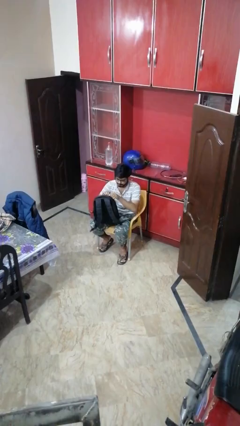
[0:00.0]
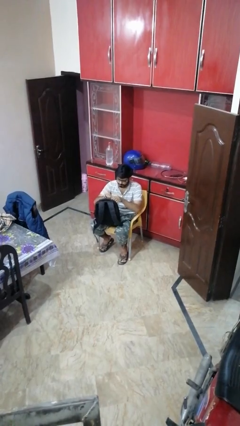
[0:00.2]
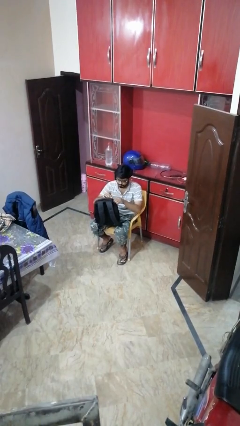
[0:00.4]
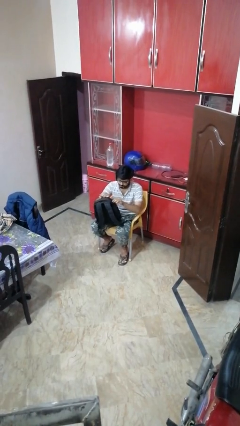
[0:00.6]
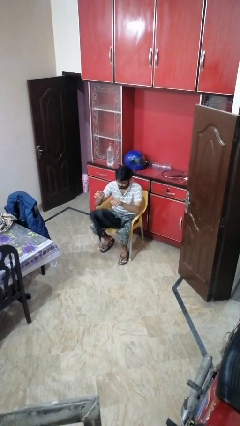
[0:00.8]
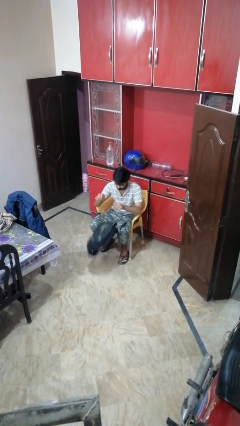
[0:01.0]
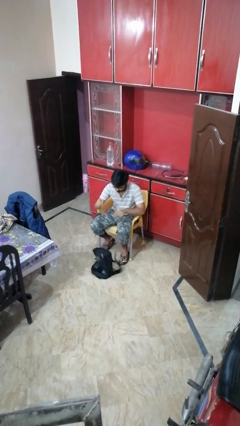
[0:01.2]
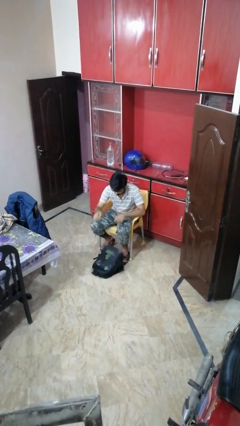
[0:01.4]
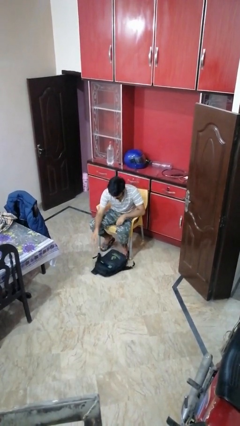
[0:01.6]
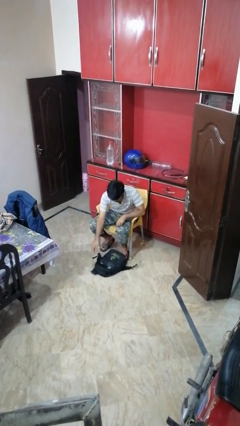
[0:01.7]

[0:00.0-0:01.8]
person drops object

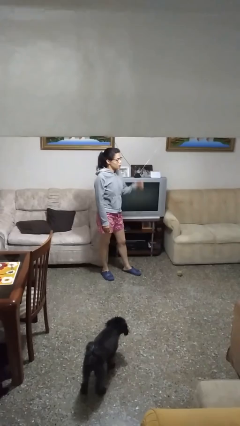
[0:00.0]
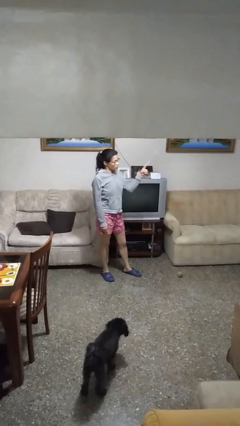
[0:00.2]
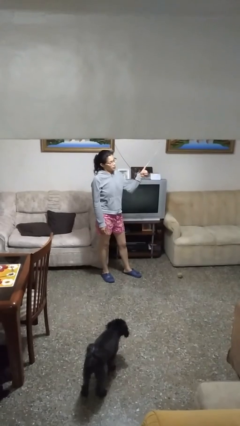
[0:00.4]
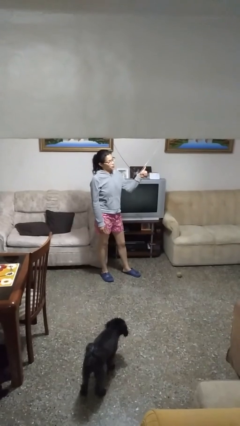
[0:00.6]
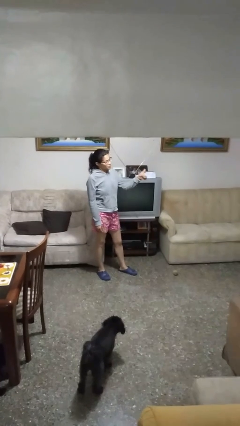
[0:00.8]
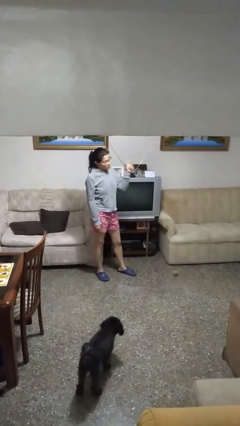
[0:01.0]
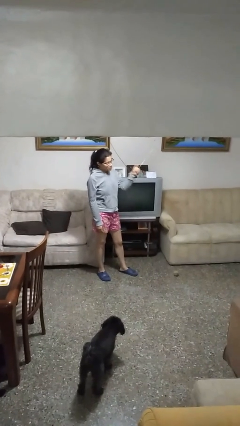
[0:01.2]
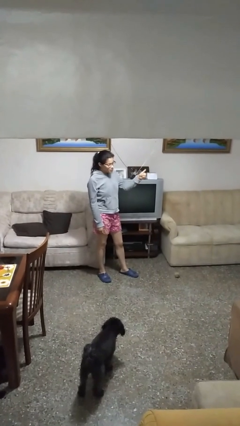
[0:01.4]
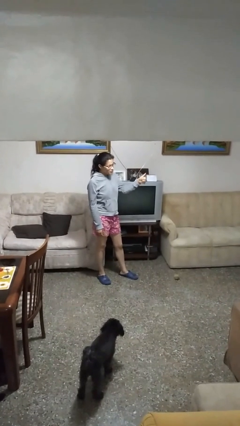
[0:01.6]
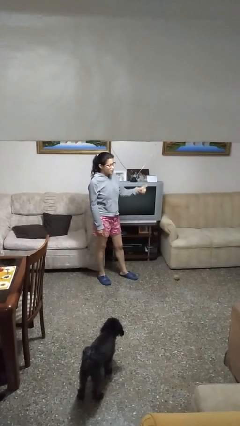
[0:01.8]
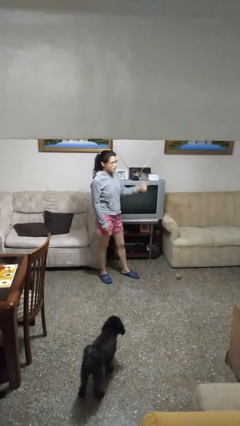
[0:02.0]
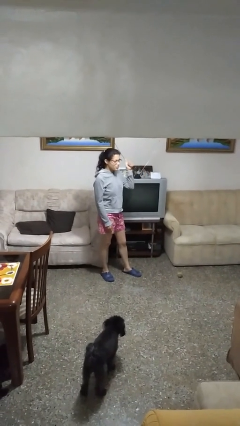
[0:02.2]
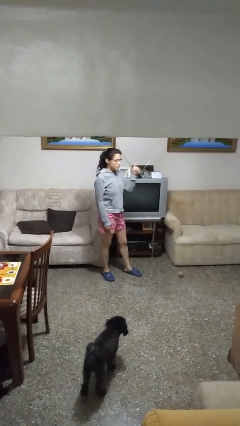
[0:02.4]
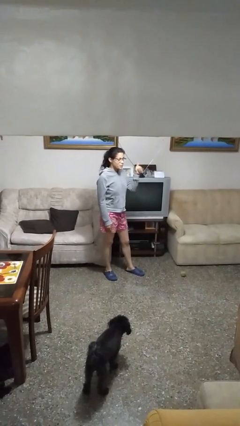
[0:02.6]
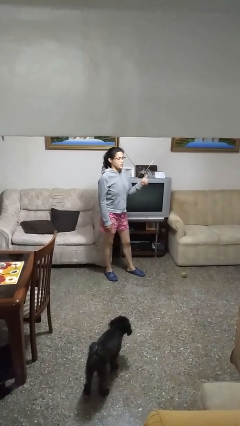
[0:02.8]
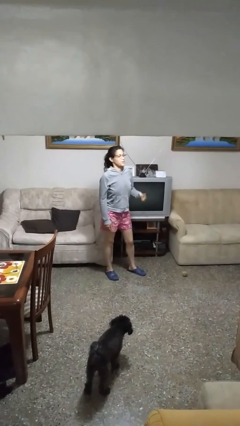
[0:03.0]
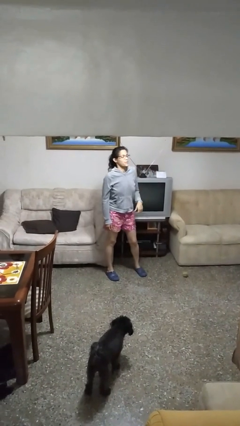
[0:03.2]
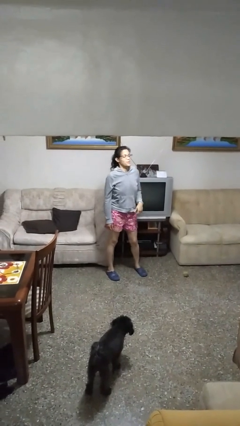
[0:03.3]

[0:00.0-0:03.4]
person gestures thumbs up

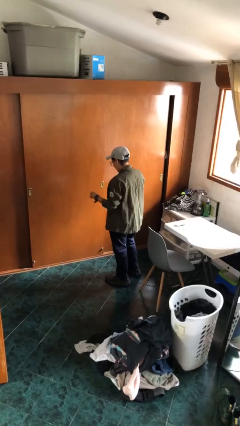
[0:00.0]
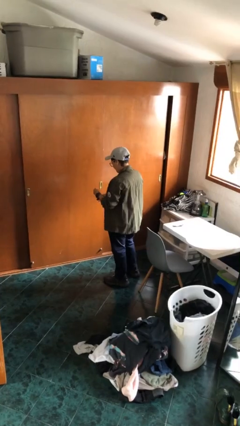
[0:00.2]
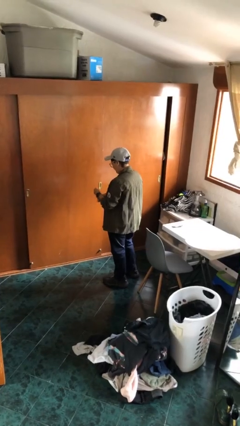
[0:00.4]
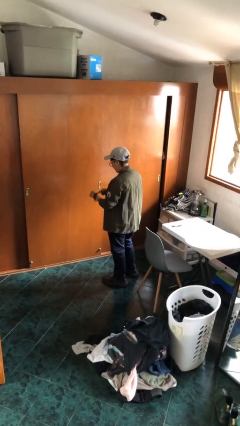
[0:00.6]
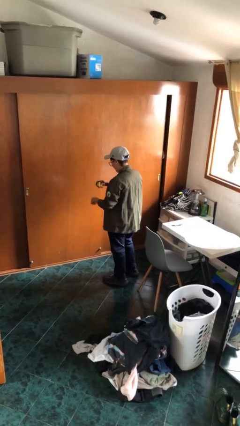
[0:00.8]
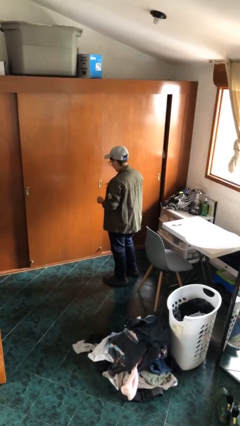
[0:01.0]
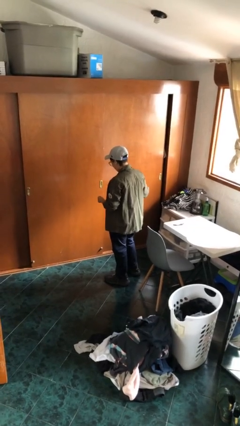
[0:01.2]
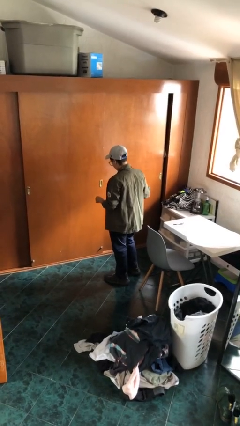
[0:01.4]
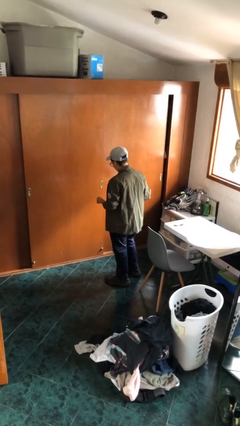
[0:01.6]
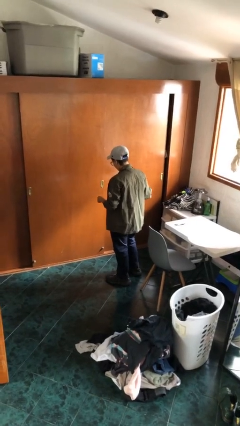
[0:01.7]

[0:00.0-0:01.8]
person takes off wristwatch

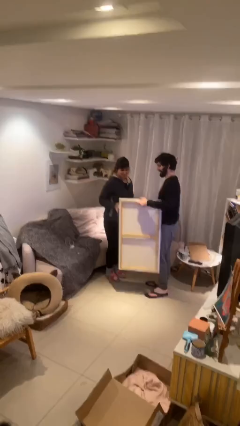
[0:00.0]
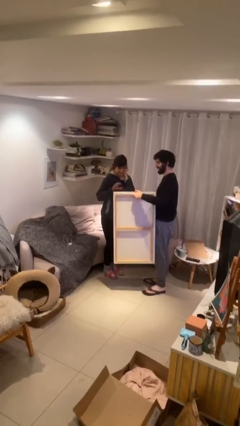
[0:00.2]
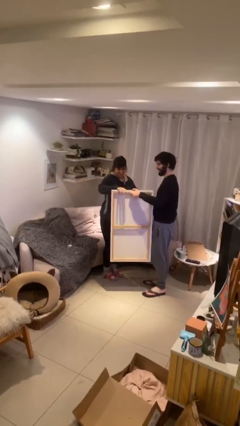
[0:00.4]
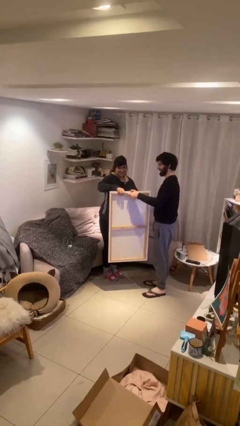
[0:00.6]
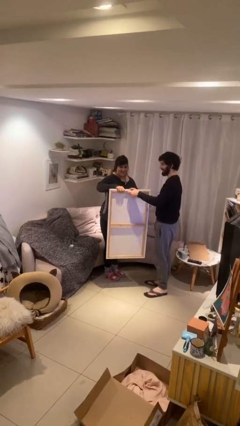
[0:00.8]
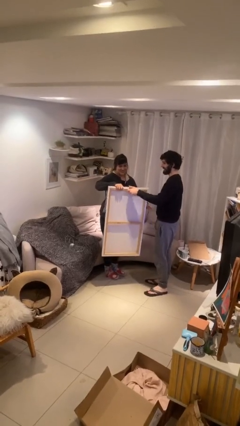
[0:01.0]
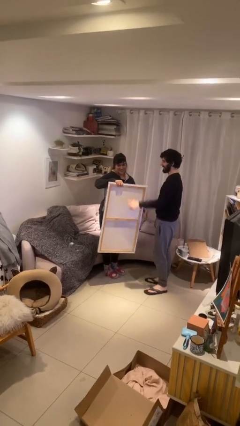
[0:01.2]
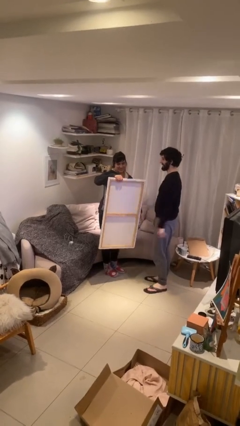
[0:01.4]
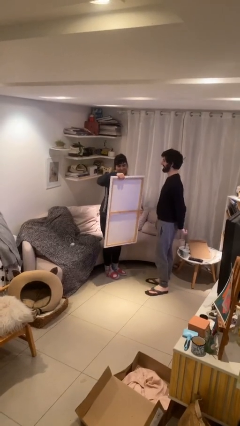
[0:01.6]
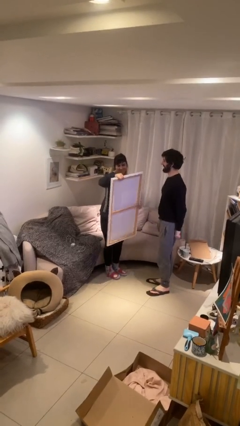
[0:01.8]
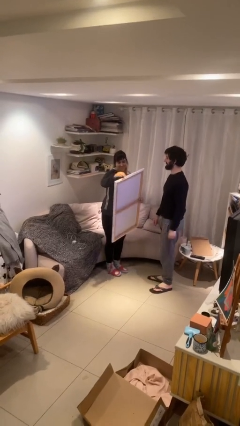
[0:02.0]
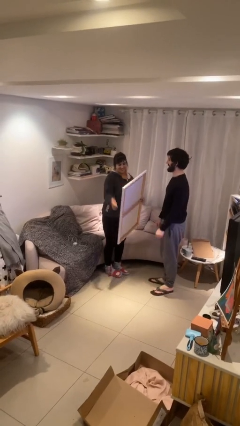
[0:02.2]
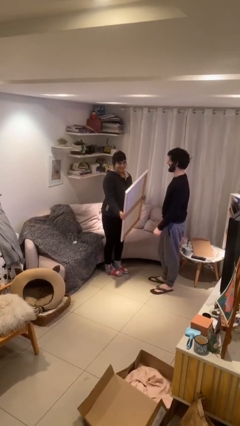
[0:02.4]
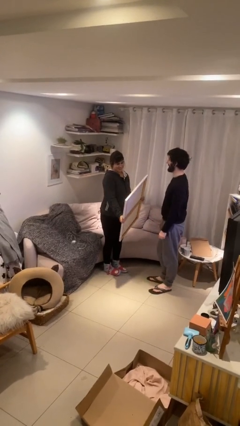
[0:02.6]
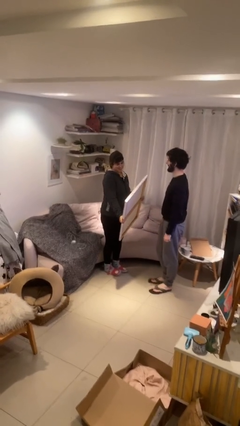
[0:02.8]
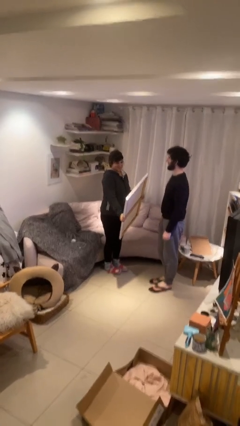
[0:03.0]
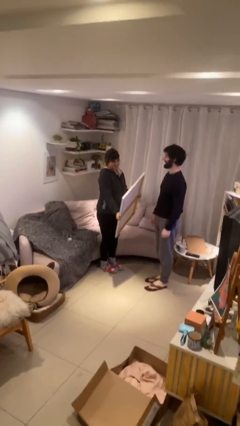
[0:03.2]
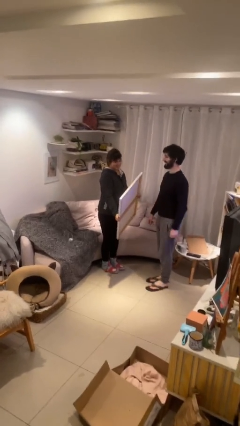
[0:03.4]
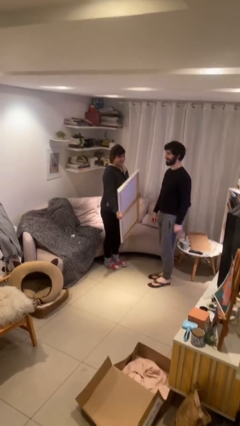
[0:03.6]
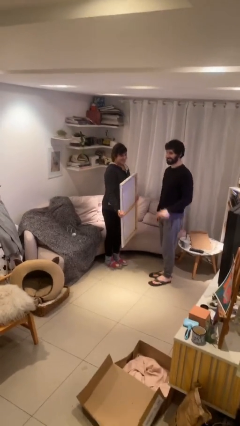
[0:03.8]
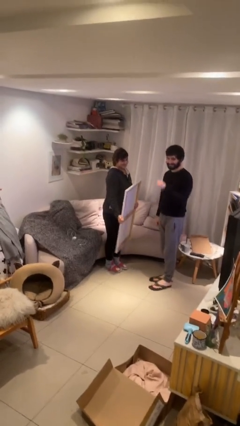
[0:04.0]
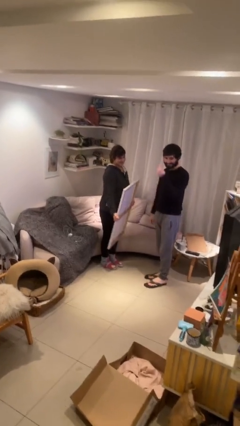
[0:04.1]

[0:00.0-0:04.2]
person transfers object to person

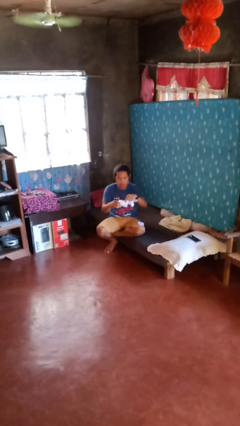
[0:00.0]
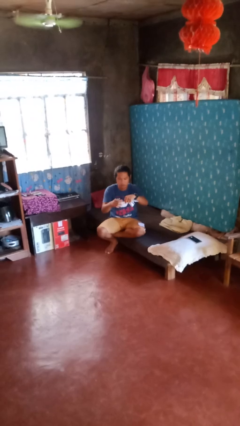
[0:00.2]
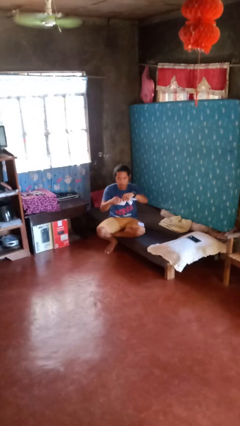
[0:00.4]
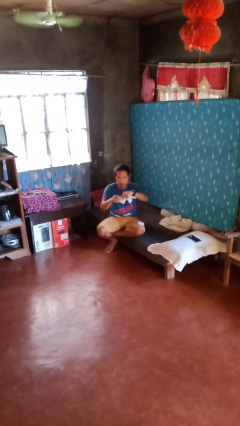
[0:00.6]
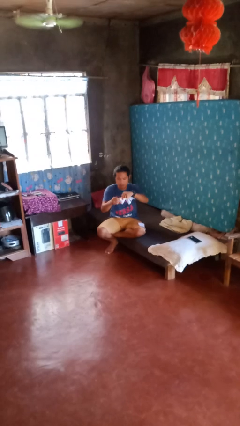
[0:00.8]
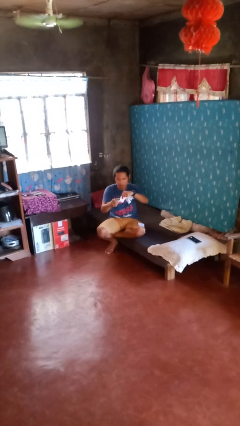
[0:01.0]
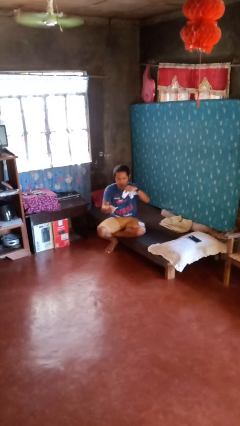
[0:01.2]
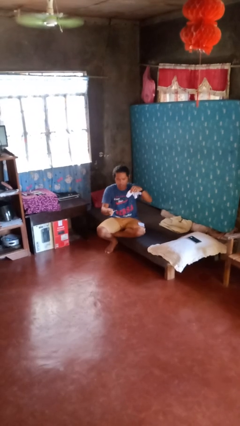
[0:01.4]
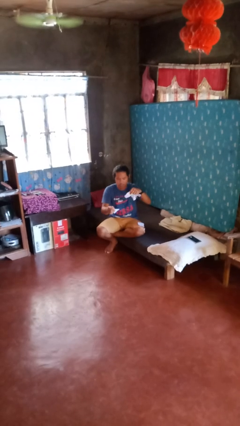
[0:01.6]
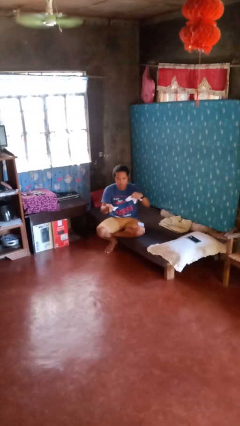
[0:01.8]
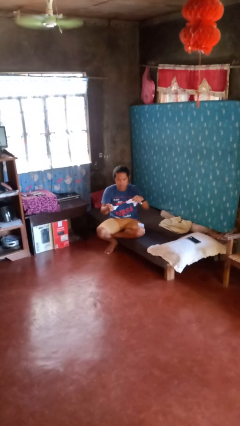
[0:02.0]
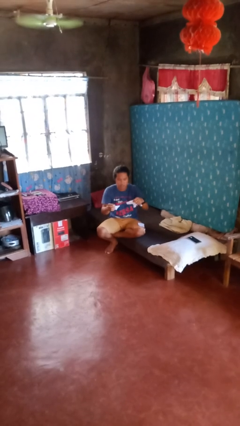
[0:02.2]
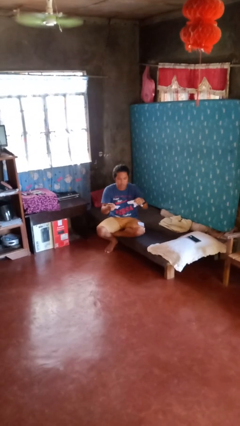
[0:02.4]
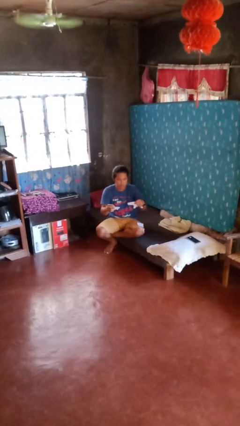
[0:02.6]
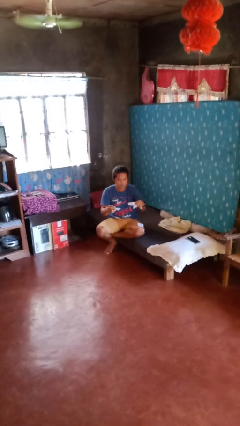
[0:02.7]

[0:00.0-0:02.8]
person tears paper

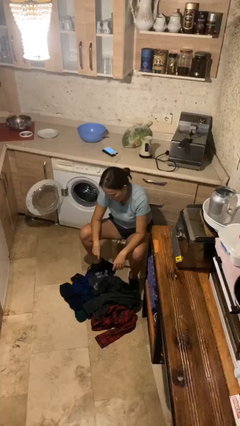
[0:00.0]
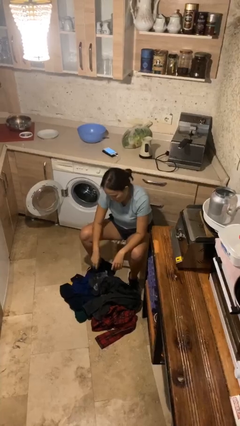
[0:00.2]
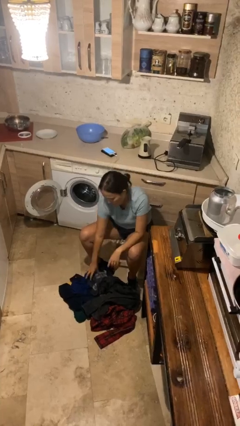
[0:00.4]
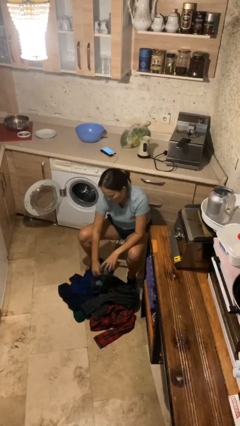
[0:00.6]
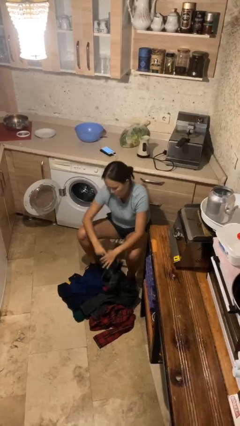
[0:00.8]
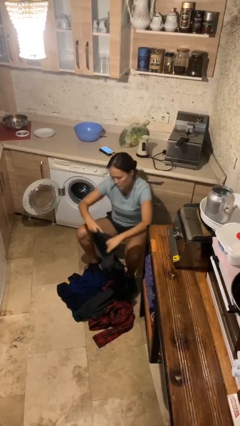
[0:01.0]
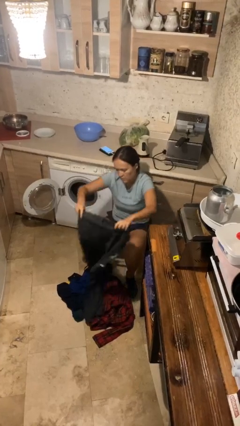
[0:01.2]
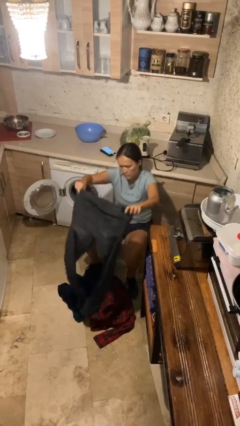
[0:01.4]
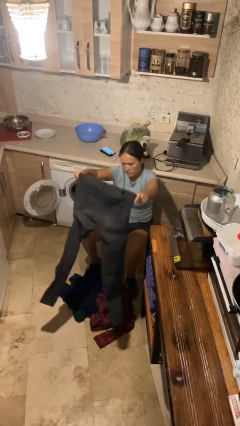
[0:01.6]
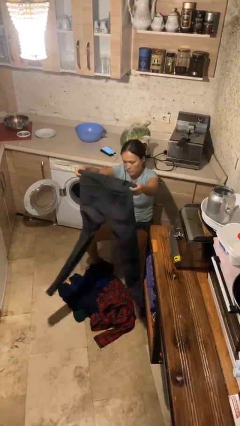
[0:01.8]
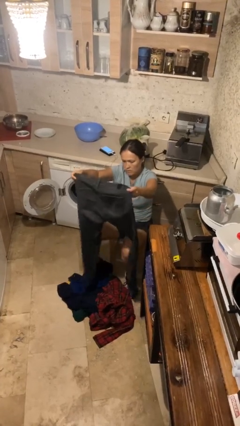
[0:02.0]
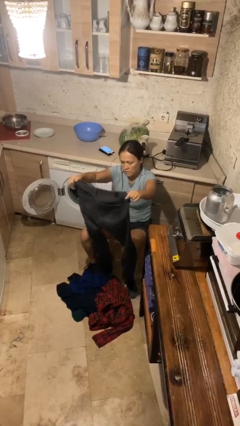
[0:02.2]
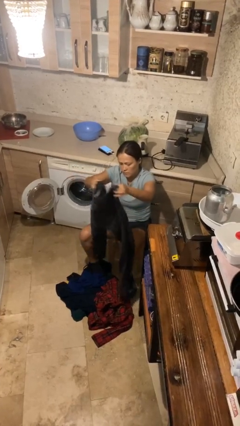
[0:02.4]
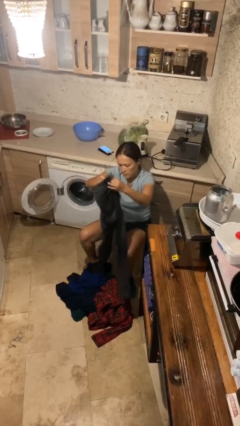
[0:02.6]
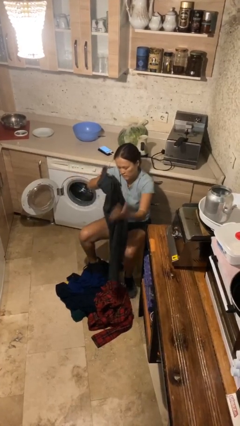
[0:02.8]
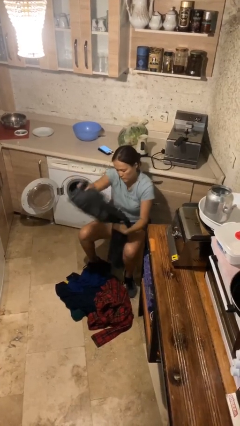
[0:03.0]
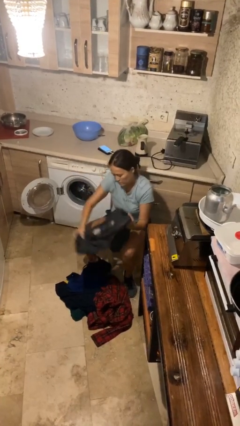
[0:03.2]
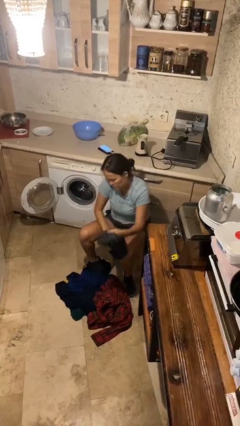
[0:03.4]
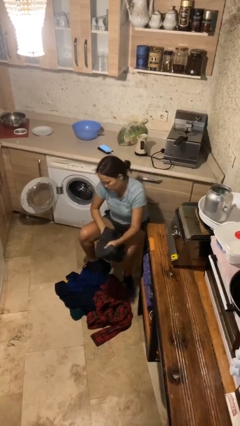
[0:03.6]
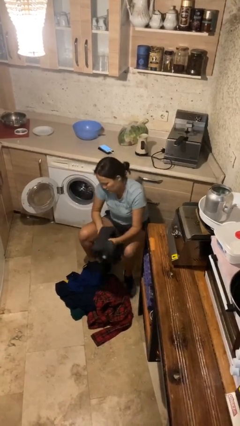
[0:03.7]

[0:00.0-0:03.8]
person folds pants
